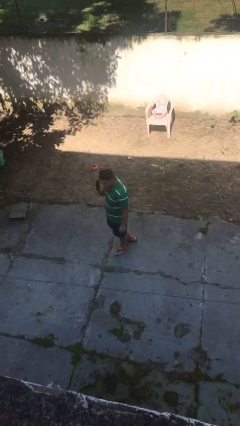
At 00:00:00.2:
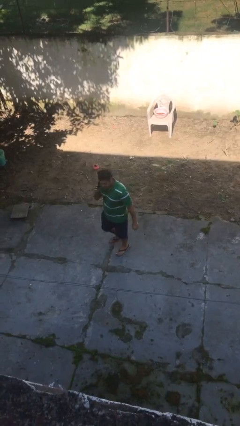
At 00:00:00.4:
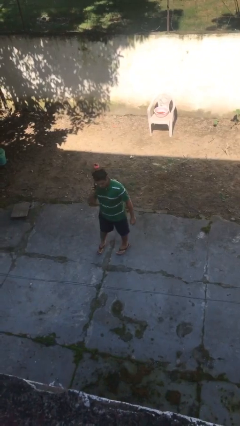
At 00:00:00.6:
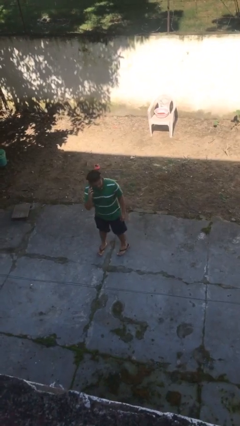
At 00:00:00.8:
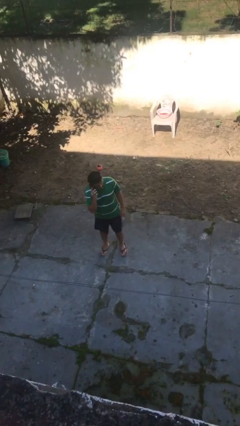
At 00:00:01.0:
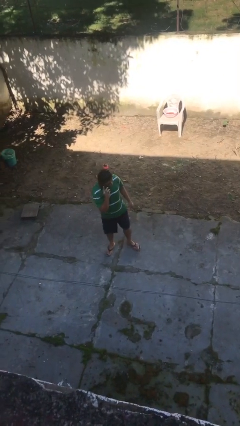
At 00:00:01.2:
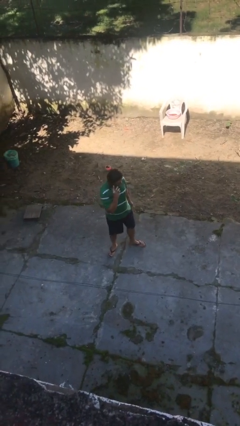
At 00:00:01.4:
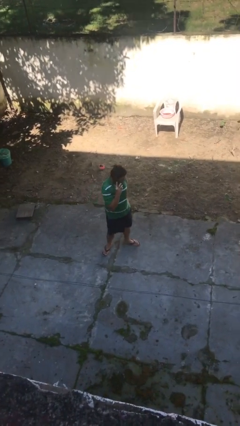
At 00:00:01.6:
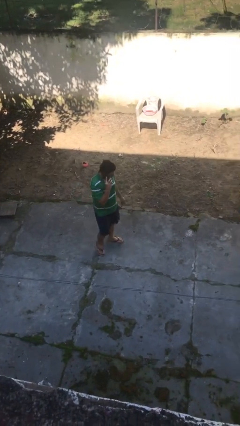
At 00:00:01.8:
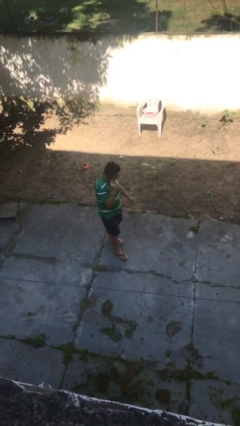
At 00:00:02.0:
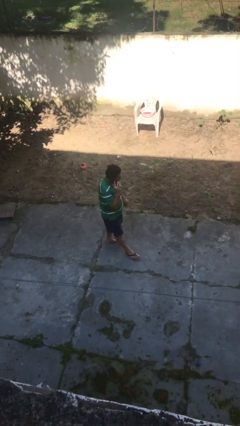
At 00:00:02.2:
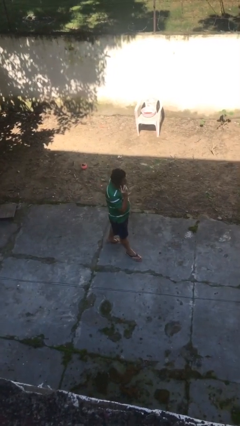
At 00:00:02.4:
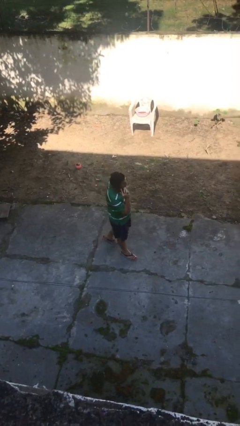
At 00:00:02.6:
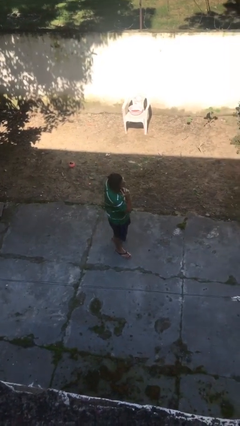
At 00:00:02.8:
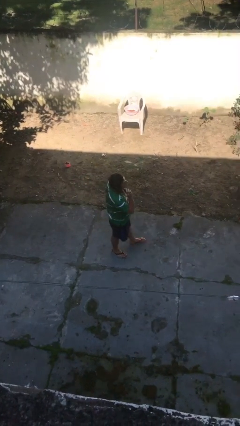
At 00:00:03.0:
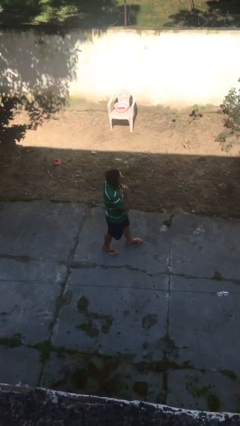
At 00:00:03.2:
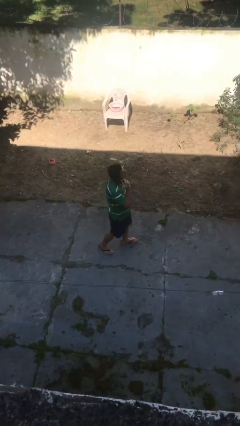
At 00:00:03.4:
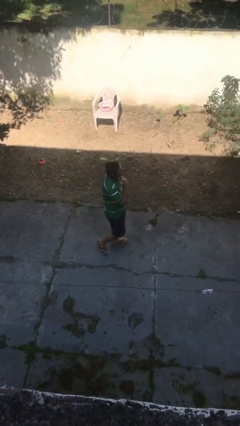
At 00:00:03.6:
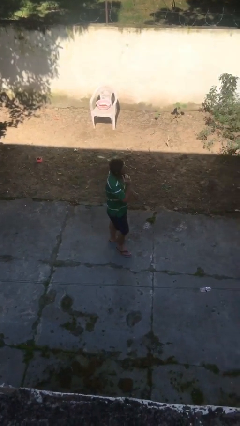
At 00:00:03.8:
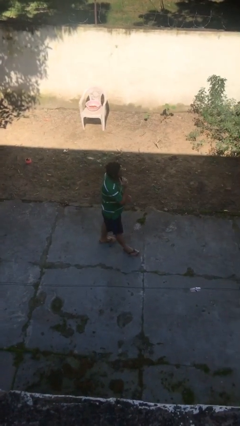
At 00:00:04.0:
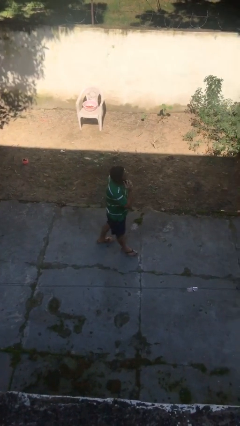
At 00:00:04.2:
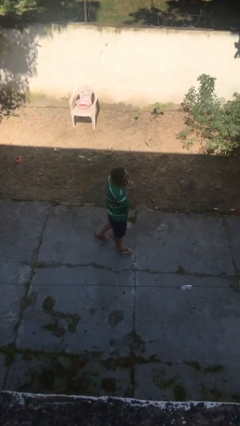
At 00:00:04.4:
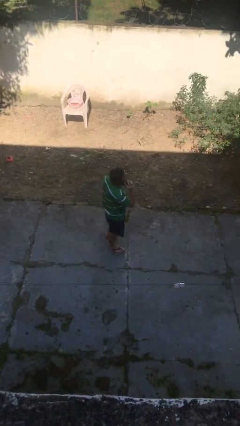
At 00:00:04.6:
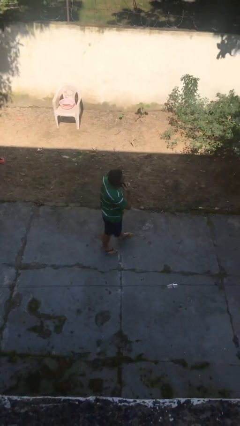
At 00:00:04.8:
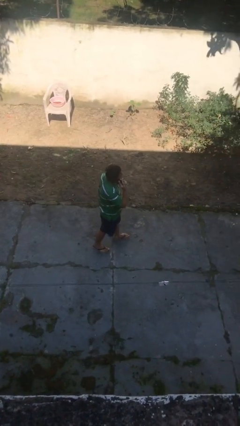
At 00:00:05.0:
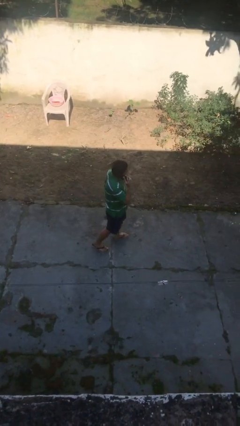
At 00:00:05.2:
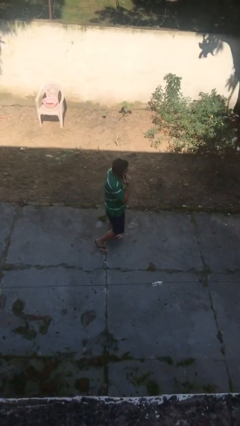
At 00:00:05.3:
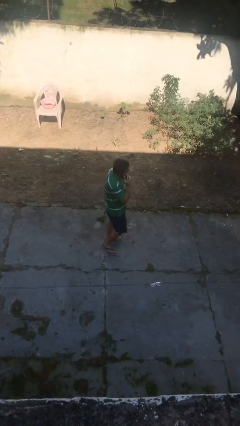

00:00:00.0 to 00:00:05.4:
person talks on phone

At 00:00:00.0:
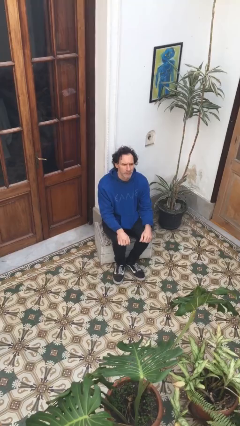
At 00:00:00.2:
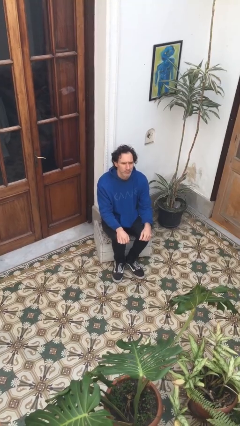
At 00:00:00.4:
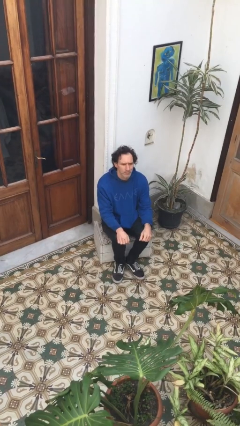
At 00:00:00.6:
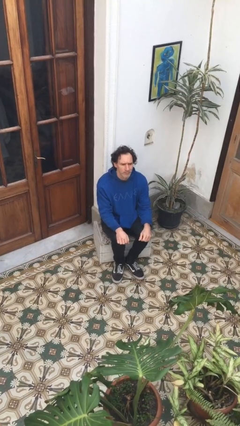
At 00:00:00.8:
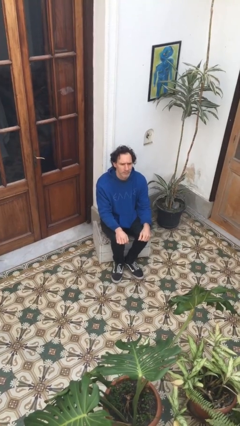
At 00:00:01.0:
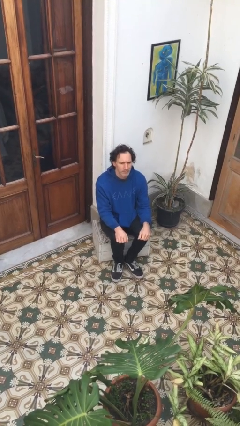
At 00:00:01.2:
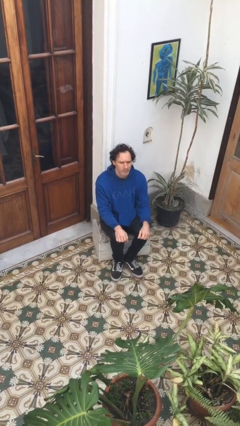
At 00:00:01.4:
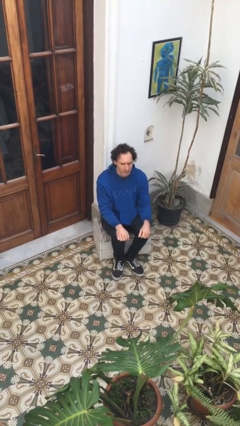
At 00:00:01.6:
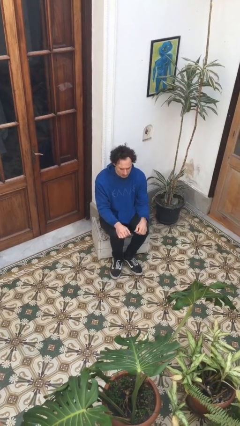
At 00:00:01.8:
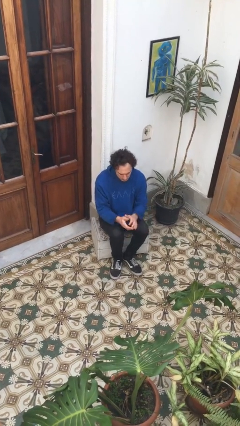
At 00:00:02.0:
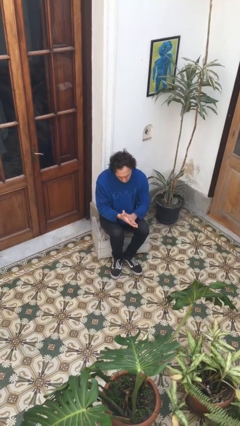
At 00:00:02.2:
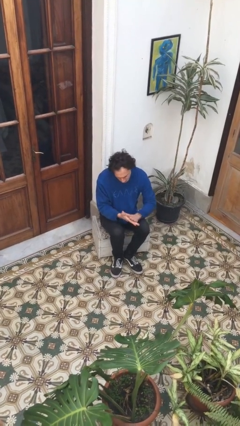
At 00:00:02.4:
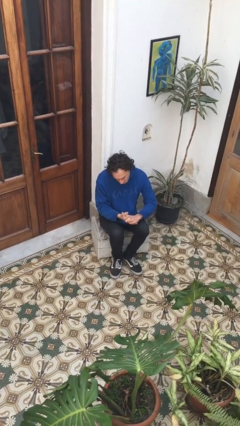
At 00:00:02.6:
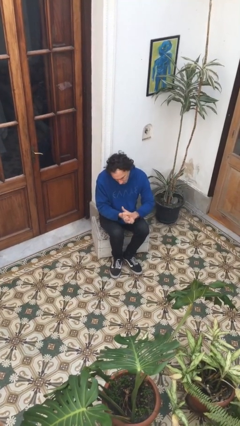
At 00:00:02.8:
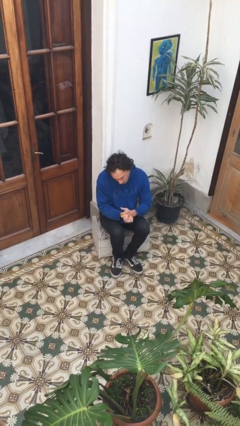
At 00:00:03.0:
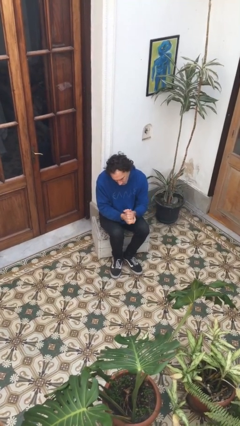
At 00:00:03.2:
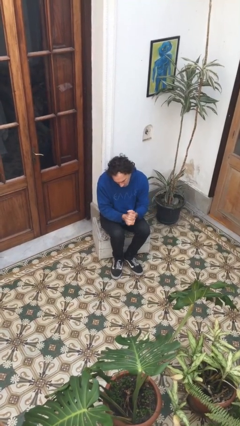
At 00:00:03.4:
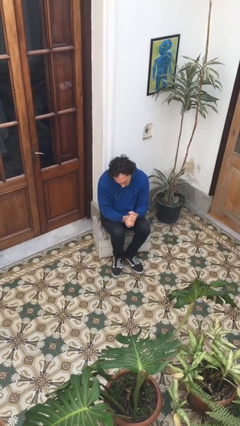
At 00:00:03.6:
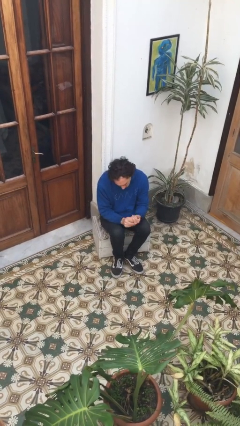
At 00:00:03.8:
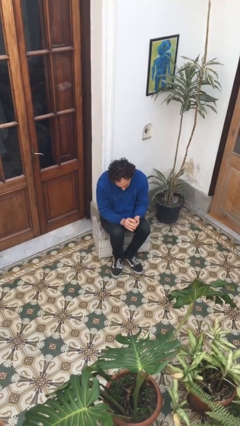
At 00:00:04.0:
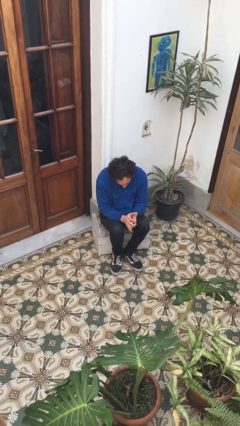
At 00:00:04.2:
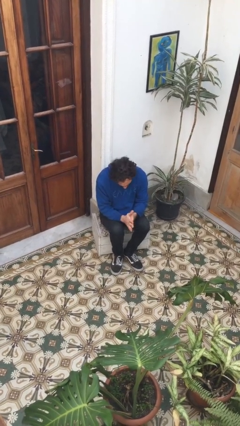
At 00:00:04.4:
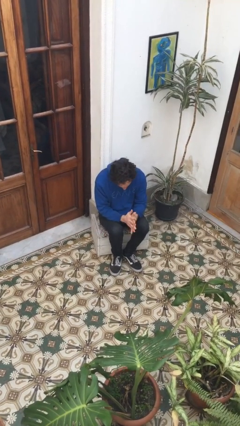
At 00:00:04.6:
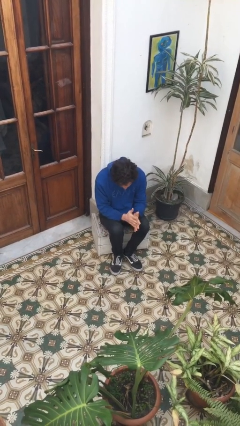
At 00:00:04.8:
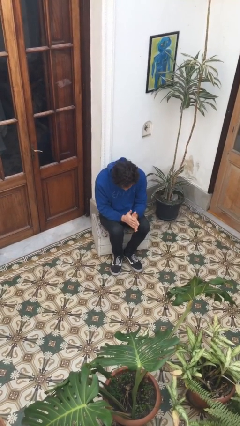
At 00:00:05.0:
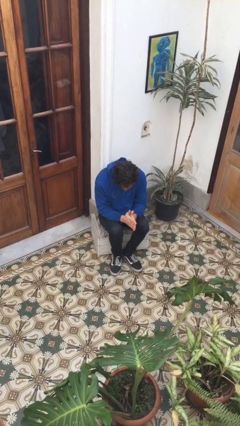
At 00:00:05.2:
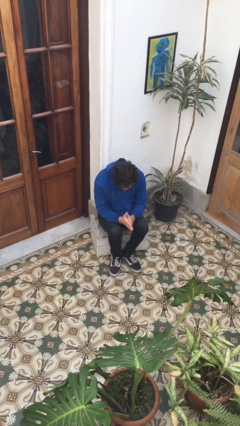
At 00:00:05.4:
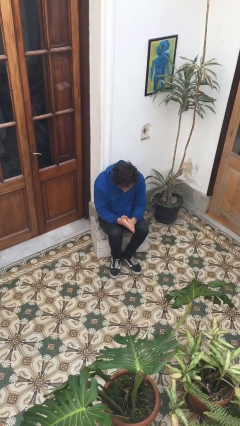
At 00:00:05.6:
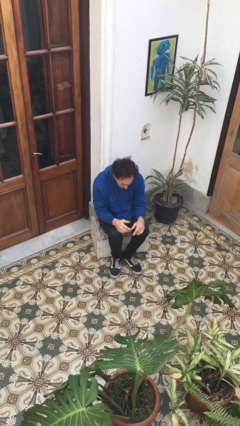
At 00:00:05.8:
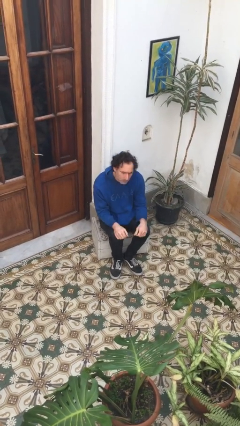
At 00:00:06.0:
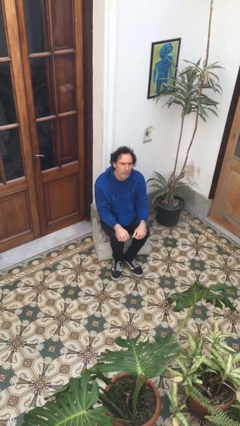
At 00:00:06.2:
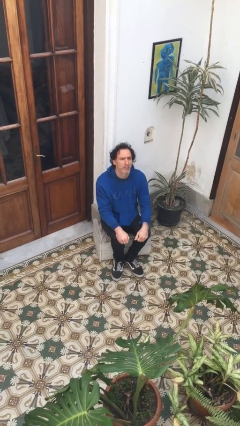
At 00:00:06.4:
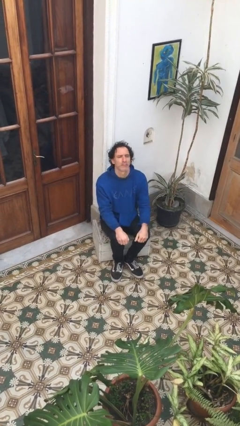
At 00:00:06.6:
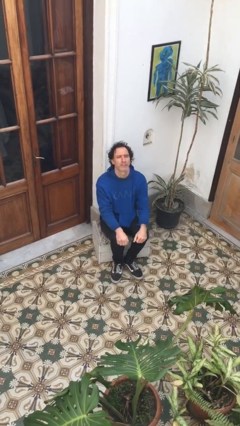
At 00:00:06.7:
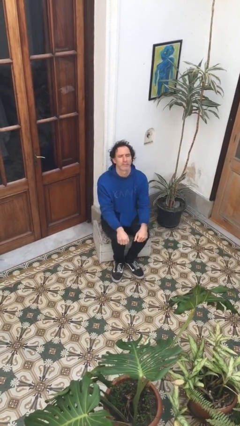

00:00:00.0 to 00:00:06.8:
person looks at hands in lap

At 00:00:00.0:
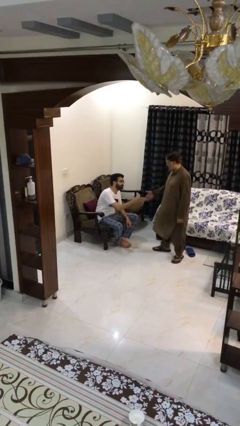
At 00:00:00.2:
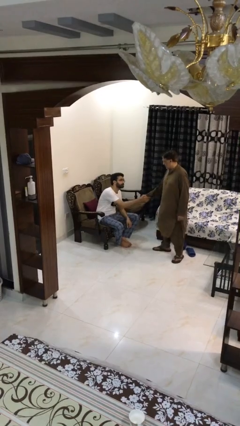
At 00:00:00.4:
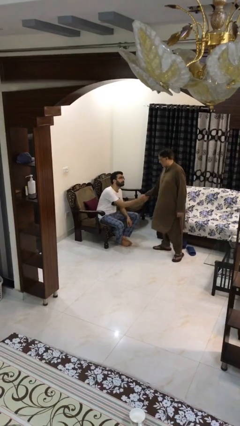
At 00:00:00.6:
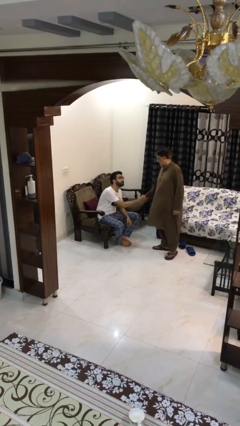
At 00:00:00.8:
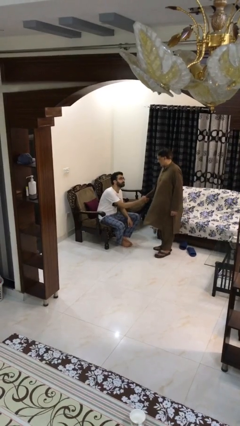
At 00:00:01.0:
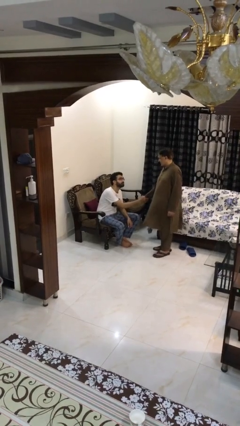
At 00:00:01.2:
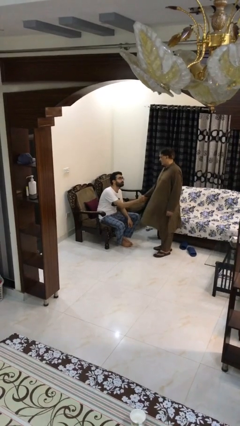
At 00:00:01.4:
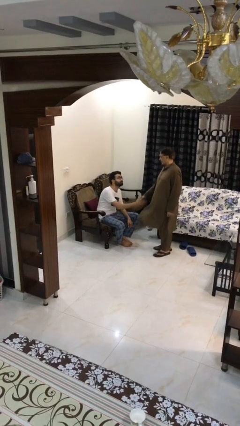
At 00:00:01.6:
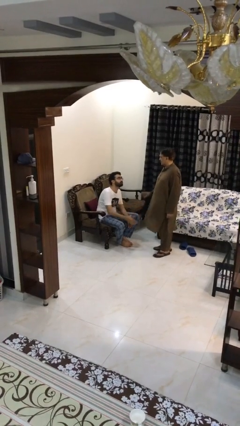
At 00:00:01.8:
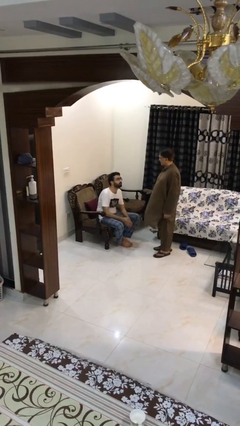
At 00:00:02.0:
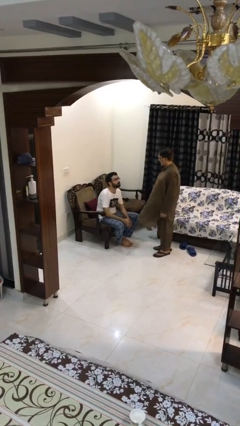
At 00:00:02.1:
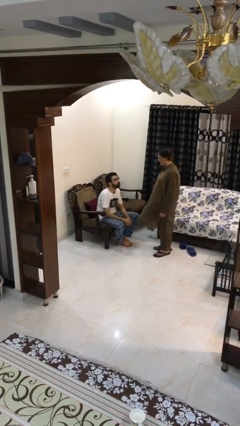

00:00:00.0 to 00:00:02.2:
person shakes hand

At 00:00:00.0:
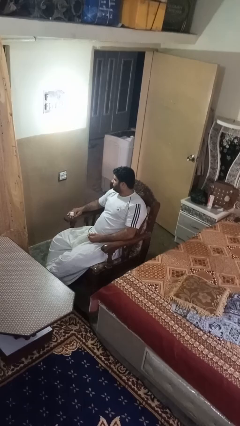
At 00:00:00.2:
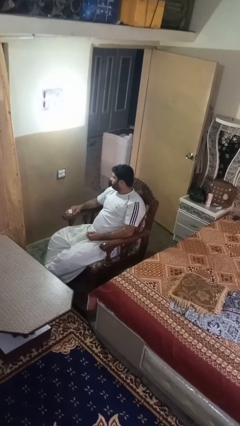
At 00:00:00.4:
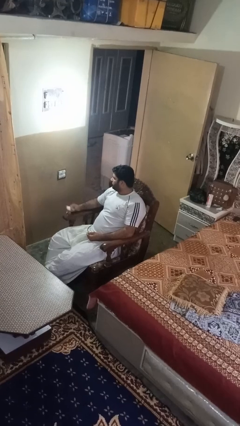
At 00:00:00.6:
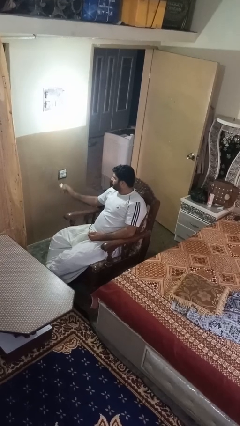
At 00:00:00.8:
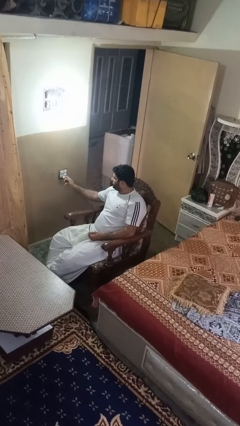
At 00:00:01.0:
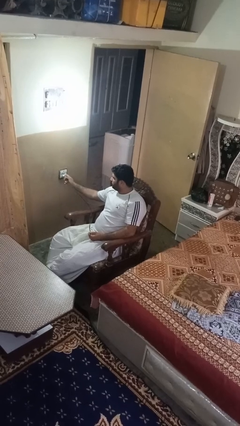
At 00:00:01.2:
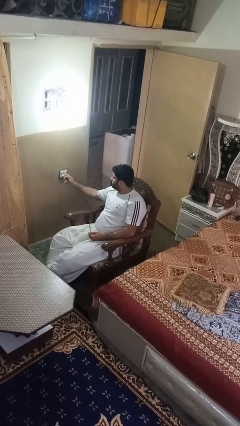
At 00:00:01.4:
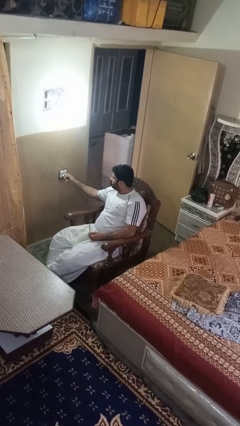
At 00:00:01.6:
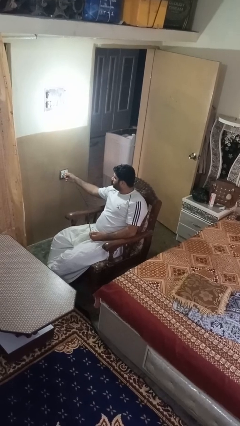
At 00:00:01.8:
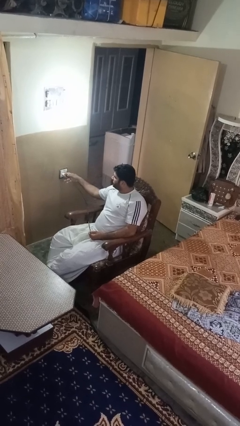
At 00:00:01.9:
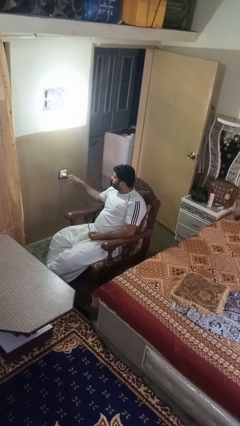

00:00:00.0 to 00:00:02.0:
person plugs into electrical socket

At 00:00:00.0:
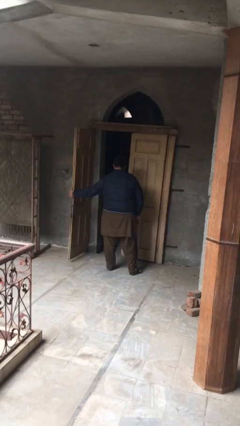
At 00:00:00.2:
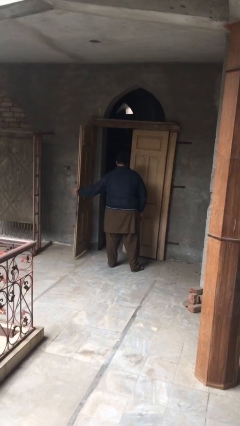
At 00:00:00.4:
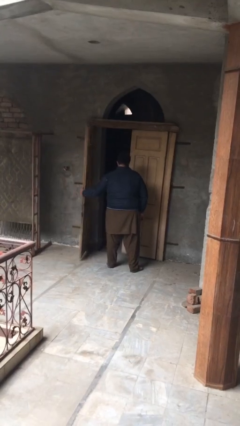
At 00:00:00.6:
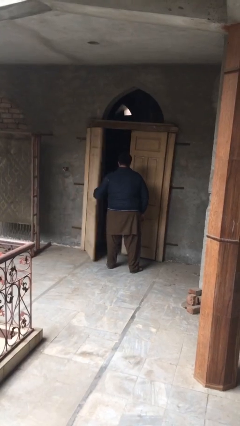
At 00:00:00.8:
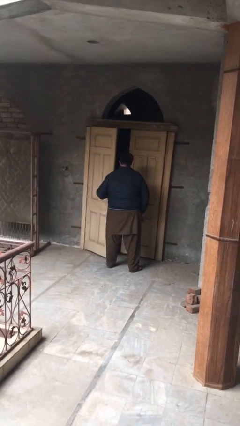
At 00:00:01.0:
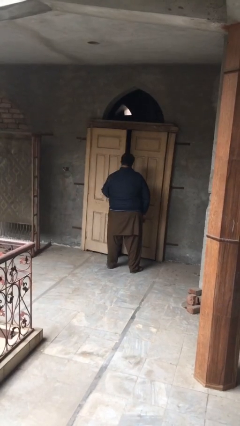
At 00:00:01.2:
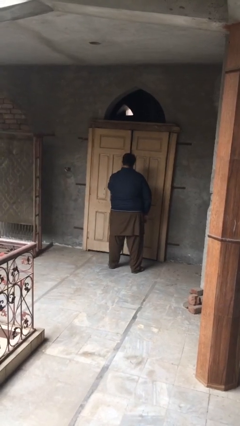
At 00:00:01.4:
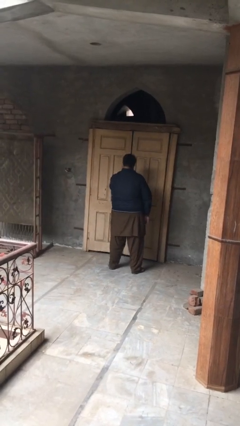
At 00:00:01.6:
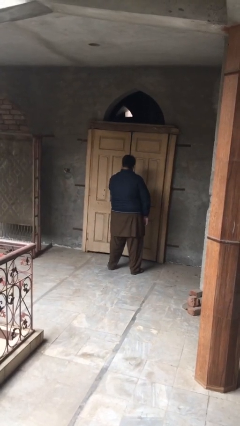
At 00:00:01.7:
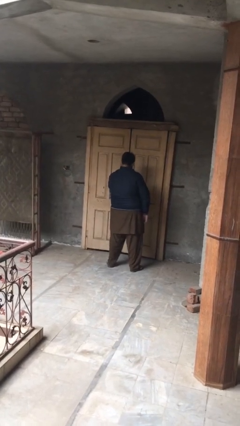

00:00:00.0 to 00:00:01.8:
person closes facility door
